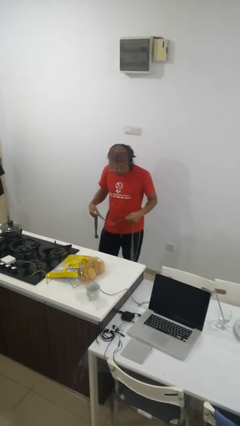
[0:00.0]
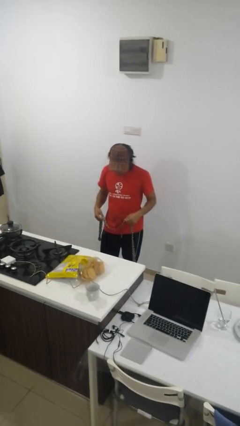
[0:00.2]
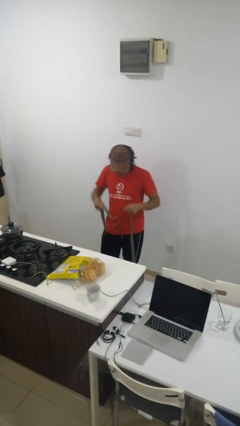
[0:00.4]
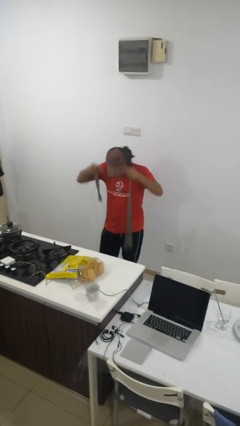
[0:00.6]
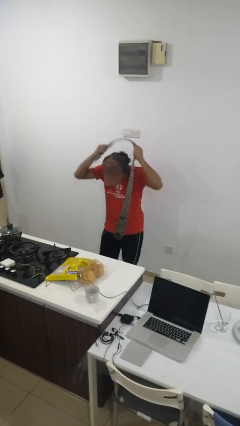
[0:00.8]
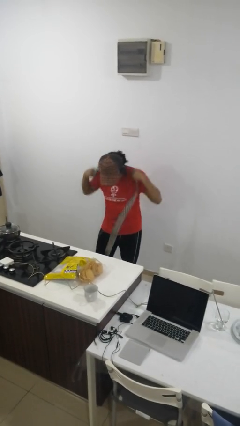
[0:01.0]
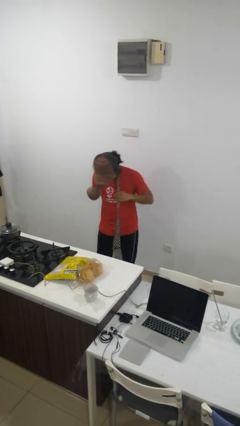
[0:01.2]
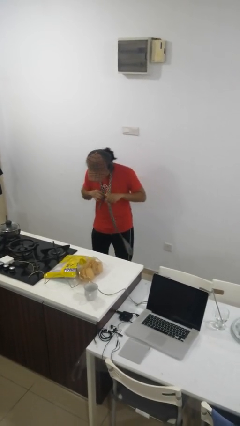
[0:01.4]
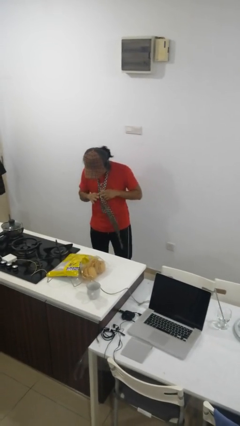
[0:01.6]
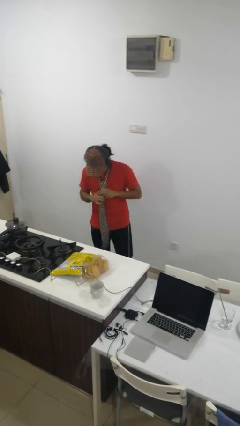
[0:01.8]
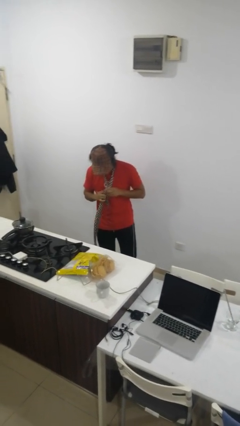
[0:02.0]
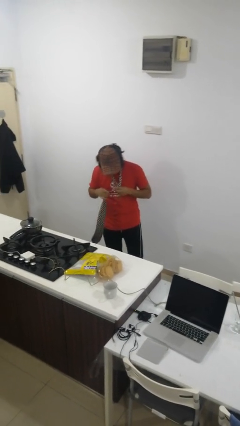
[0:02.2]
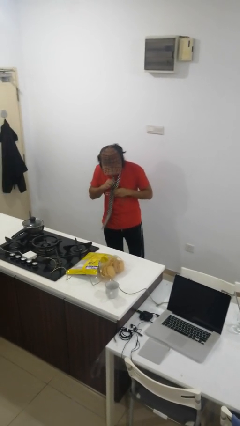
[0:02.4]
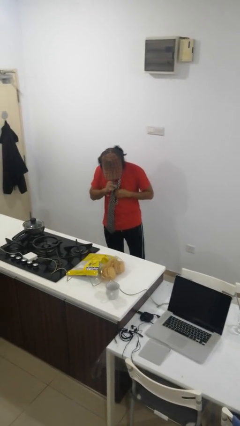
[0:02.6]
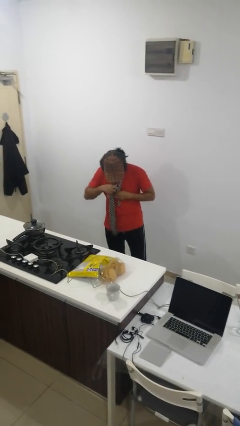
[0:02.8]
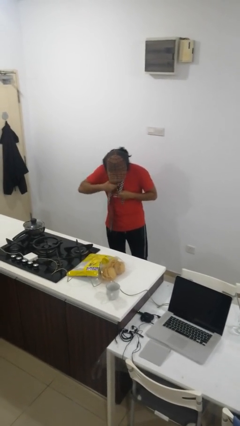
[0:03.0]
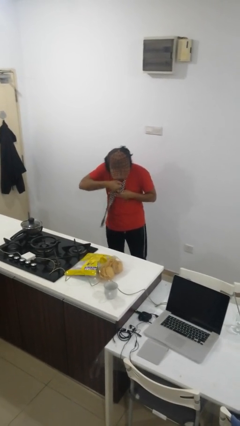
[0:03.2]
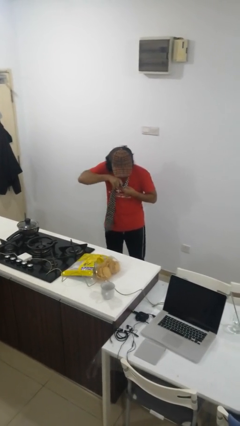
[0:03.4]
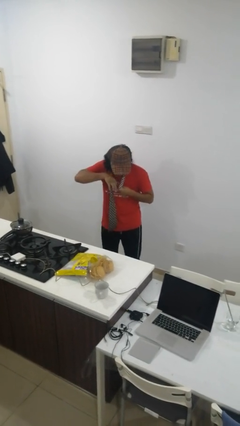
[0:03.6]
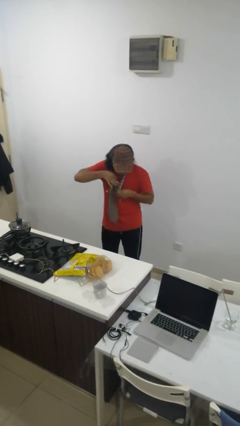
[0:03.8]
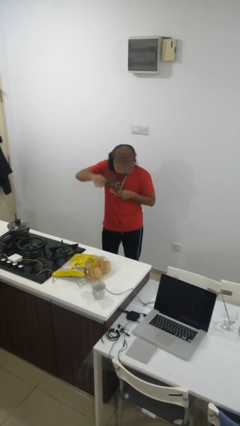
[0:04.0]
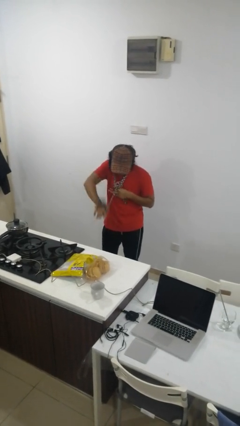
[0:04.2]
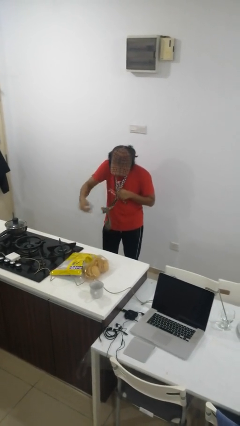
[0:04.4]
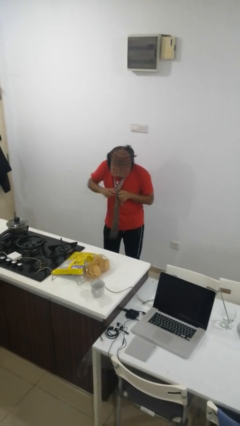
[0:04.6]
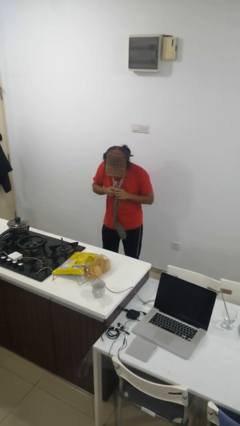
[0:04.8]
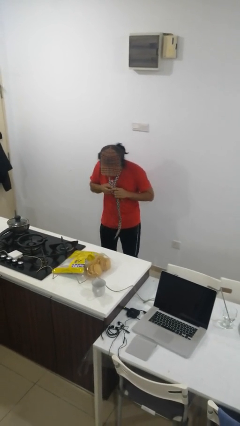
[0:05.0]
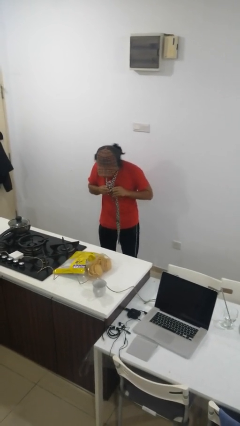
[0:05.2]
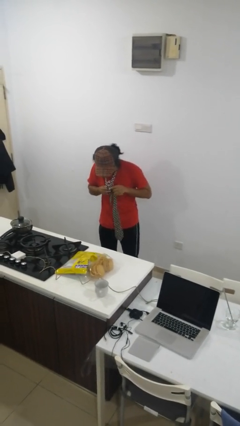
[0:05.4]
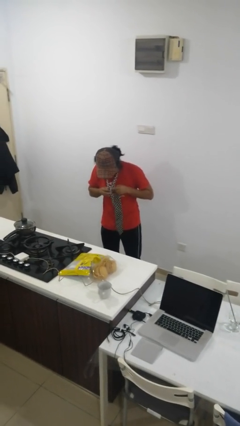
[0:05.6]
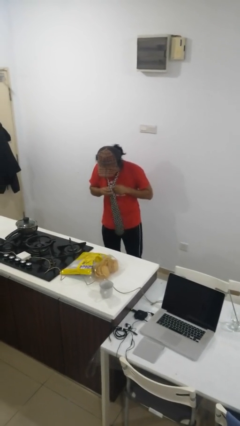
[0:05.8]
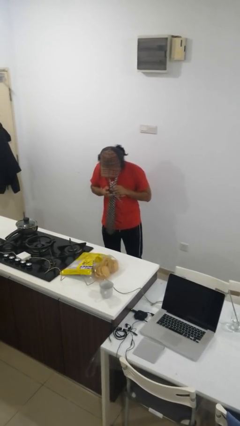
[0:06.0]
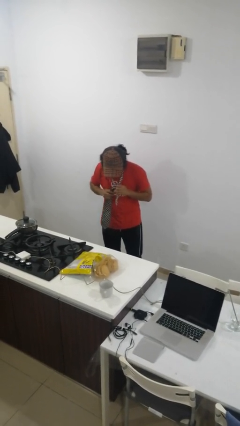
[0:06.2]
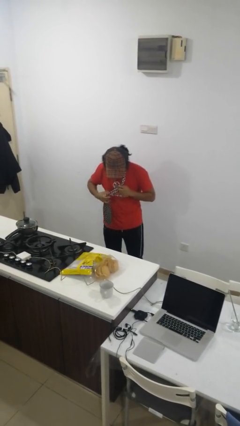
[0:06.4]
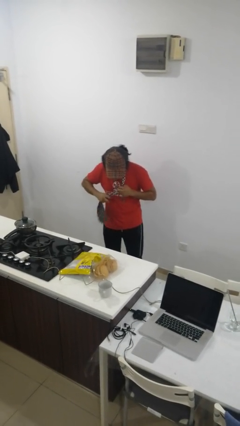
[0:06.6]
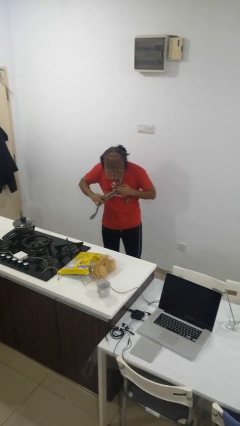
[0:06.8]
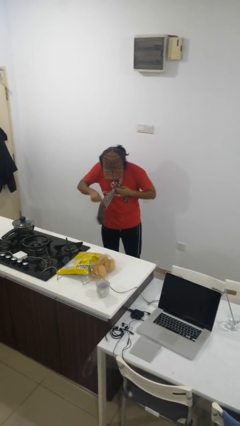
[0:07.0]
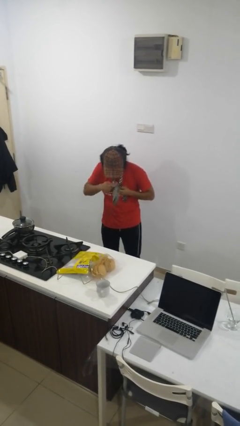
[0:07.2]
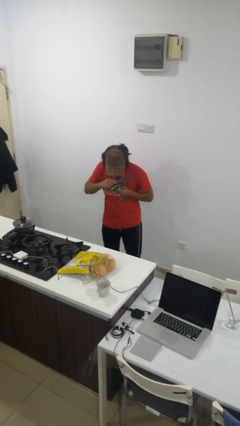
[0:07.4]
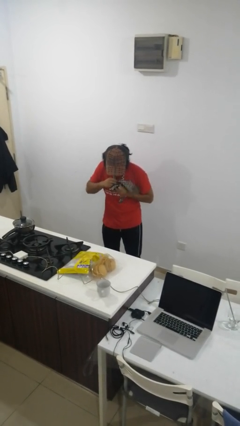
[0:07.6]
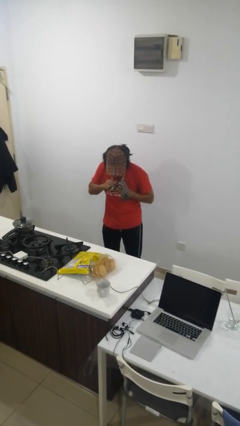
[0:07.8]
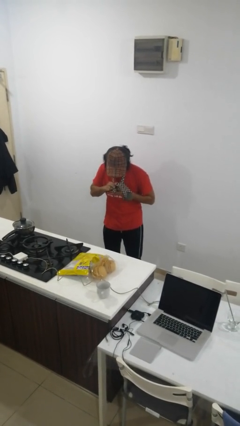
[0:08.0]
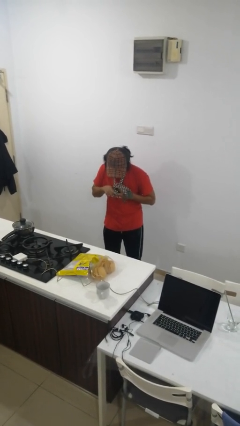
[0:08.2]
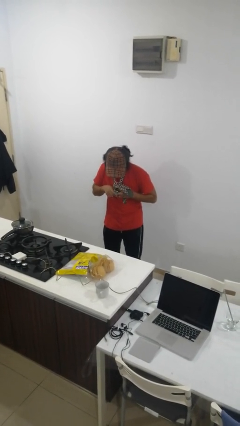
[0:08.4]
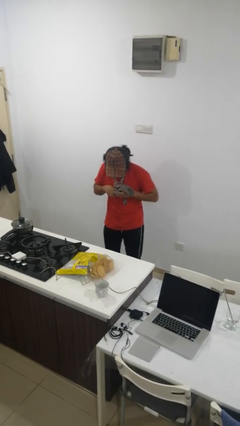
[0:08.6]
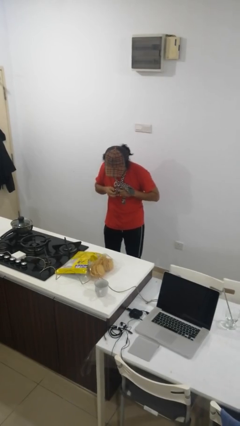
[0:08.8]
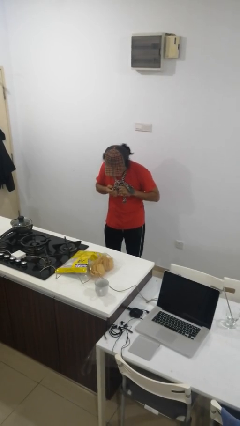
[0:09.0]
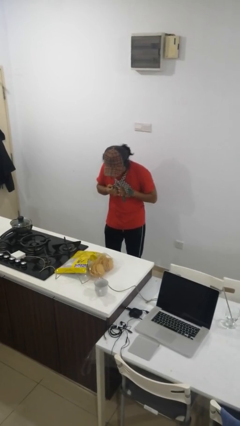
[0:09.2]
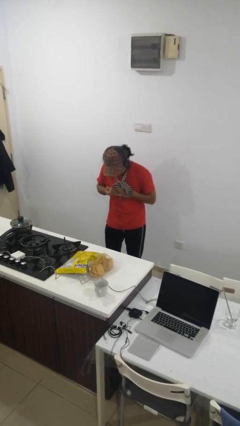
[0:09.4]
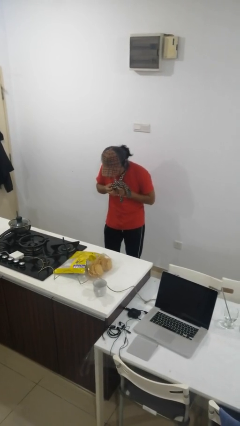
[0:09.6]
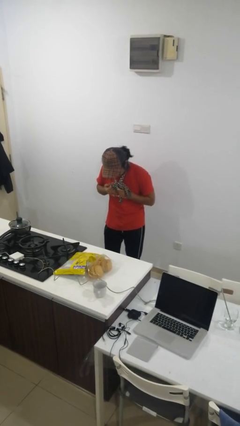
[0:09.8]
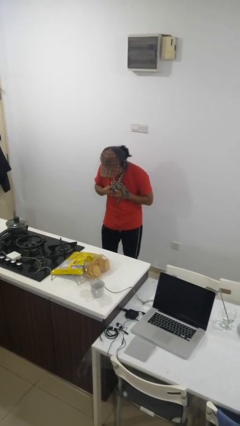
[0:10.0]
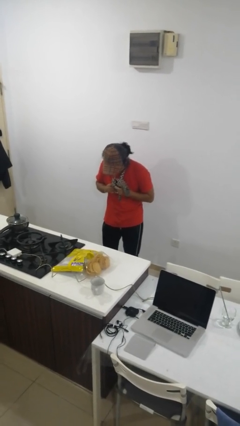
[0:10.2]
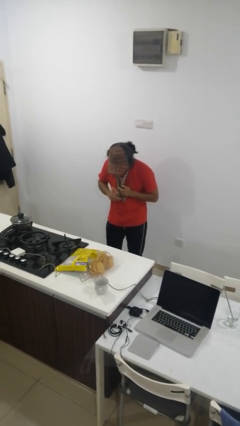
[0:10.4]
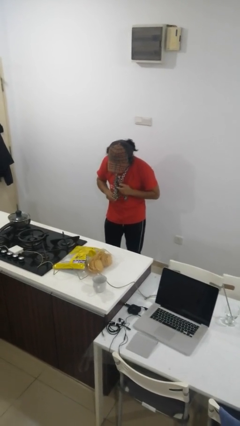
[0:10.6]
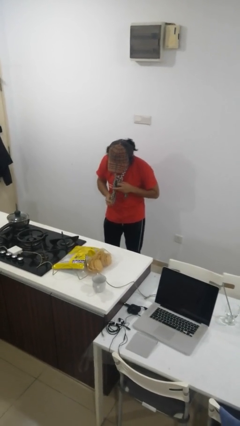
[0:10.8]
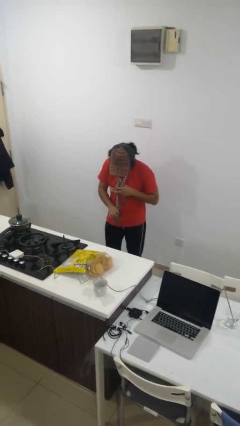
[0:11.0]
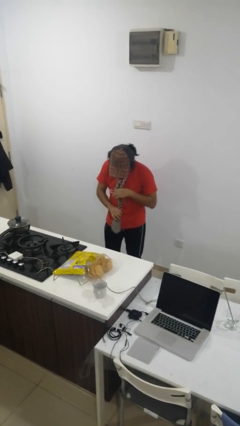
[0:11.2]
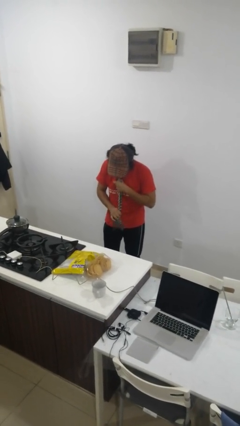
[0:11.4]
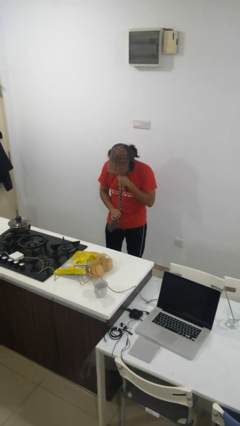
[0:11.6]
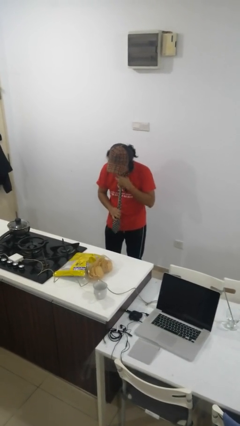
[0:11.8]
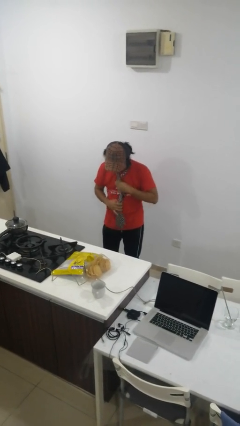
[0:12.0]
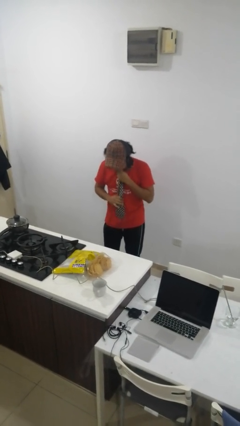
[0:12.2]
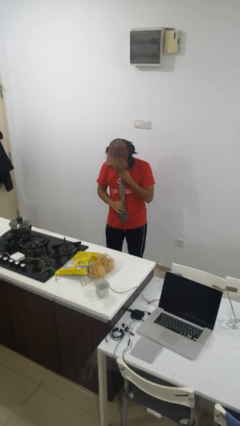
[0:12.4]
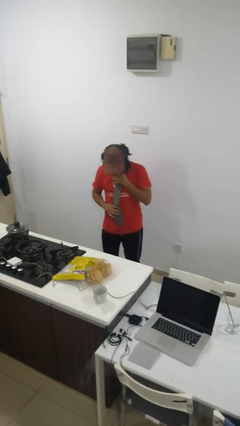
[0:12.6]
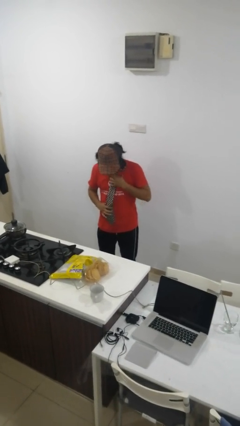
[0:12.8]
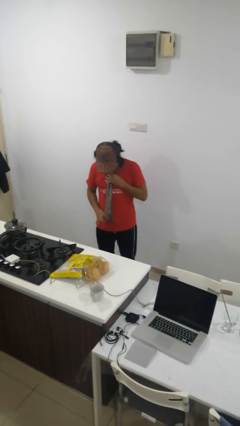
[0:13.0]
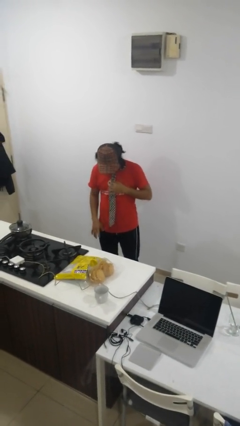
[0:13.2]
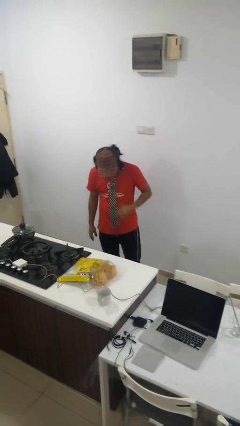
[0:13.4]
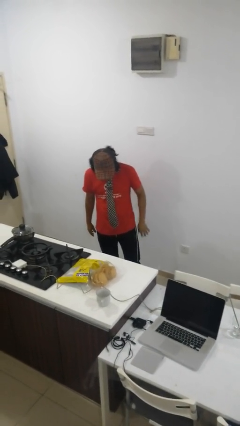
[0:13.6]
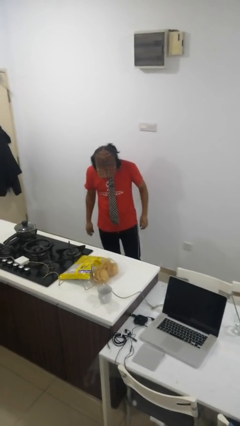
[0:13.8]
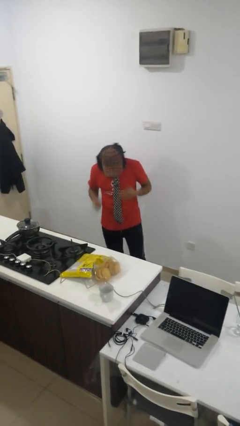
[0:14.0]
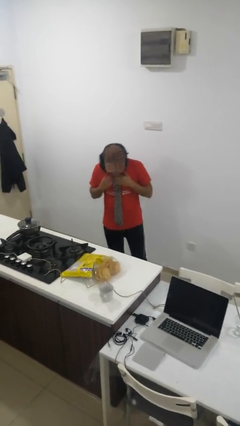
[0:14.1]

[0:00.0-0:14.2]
person puts on necktie

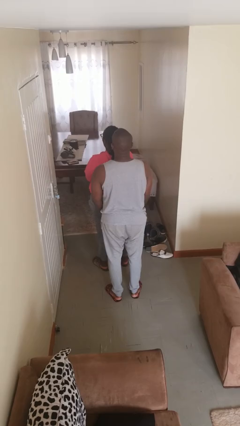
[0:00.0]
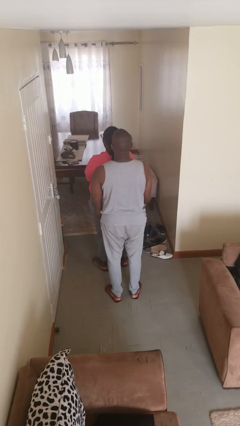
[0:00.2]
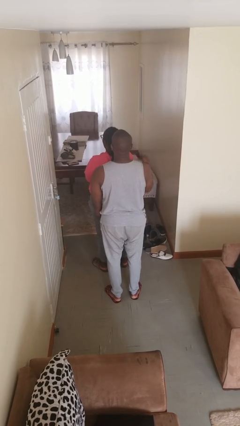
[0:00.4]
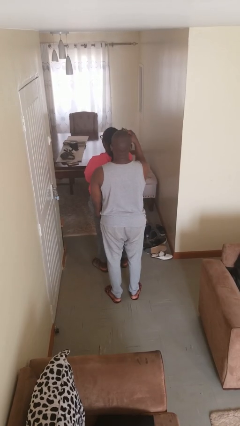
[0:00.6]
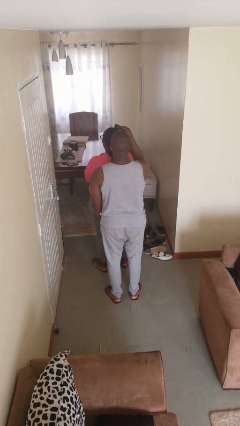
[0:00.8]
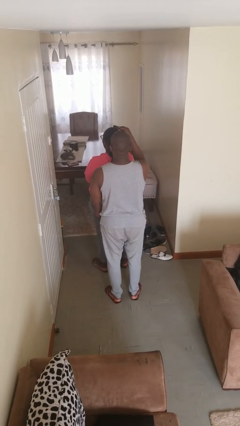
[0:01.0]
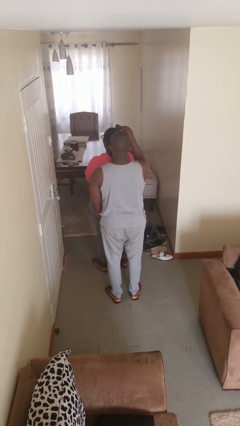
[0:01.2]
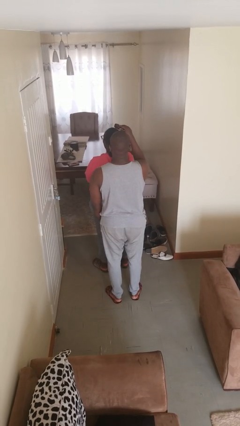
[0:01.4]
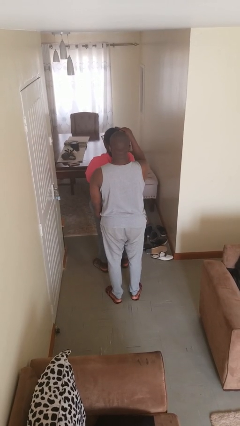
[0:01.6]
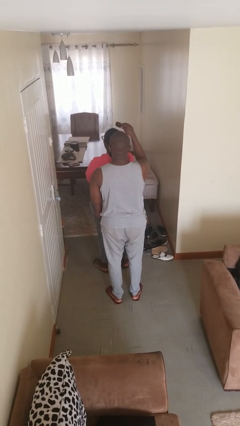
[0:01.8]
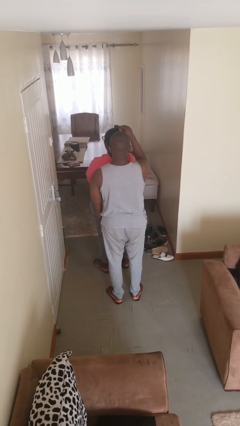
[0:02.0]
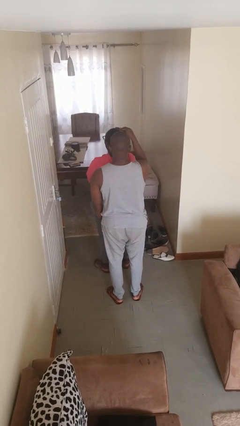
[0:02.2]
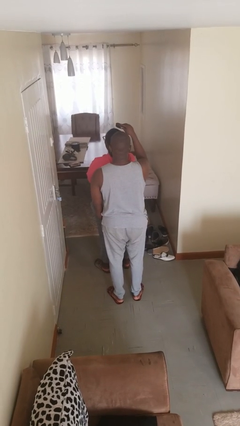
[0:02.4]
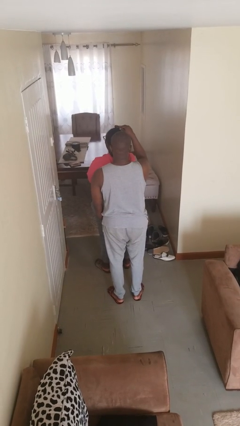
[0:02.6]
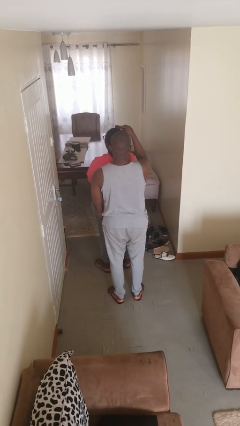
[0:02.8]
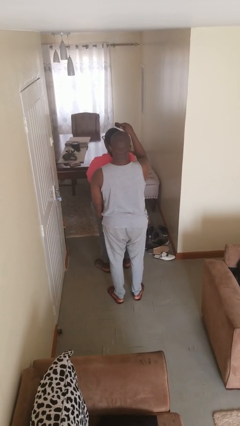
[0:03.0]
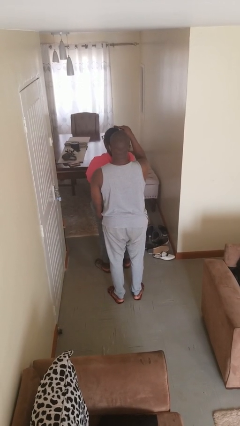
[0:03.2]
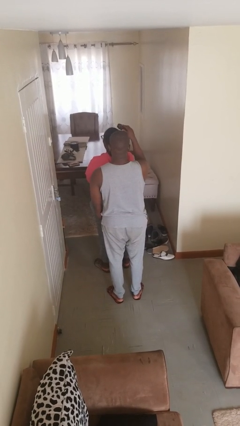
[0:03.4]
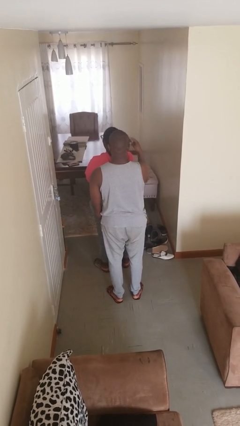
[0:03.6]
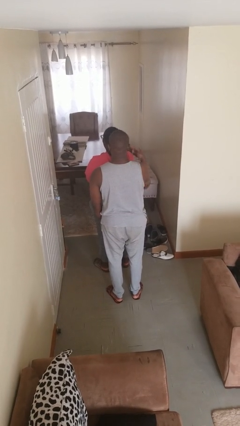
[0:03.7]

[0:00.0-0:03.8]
person brushes hair of person

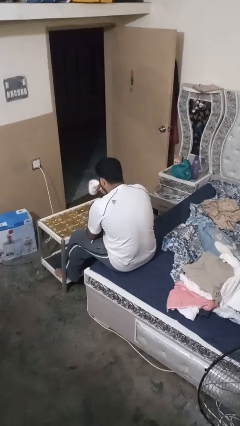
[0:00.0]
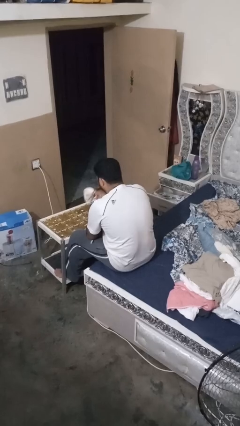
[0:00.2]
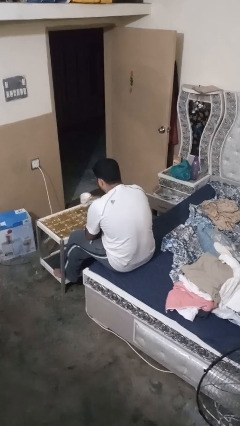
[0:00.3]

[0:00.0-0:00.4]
person puts down object on table
